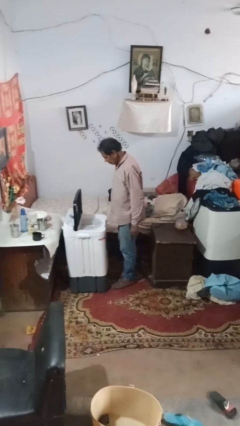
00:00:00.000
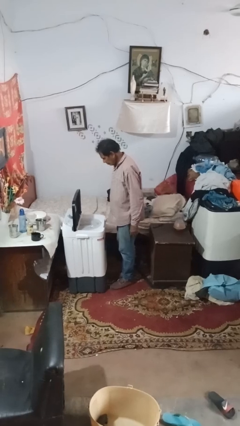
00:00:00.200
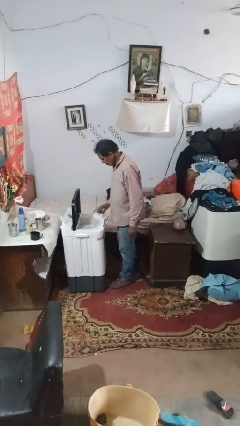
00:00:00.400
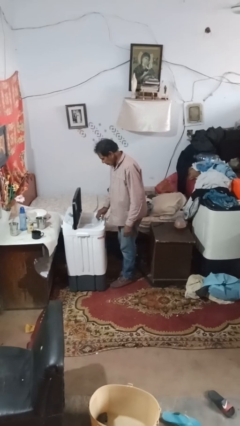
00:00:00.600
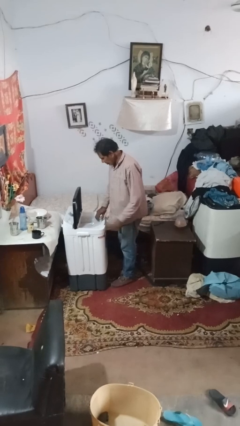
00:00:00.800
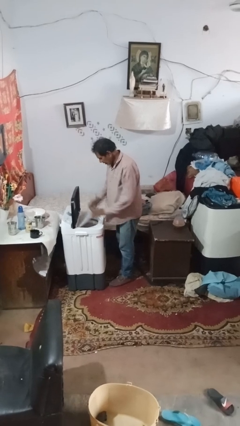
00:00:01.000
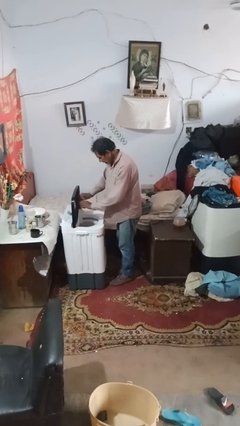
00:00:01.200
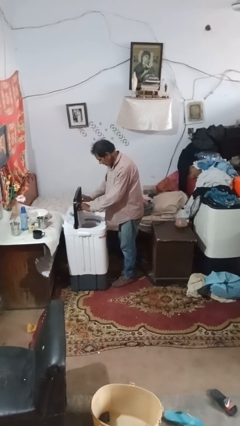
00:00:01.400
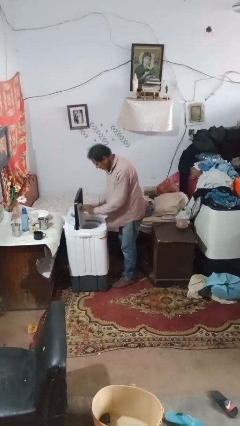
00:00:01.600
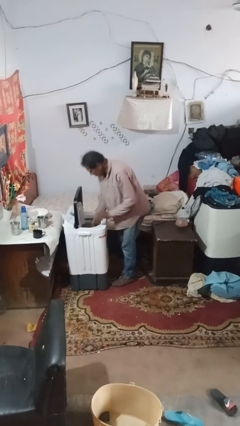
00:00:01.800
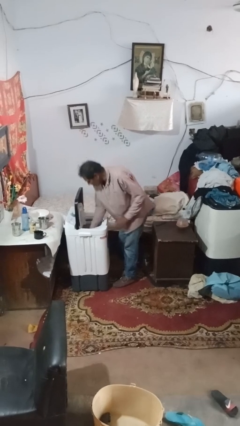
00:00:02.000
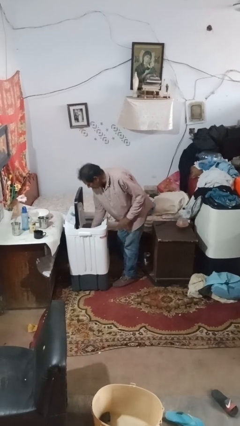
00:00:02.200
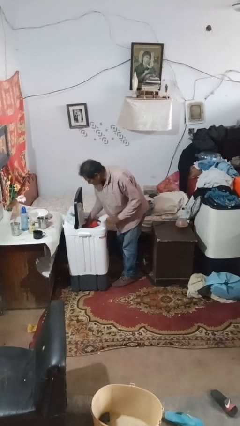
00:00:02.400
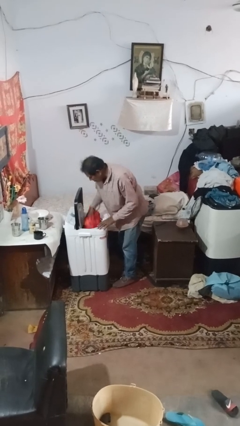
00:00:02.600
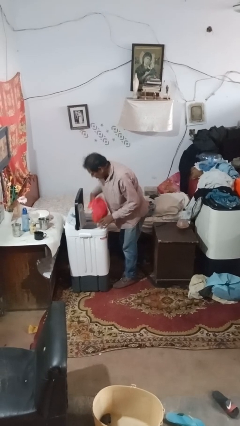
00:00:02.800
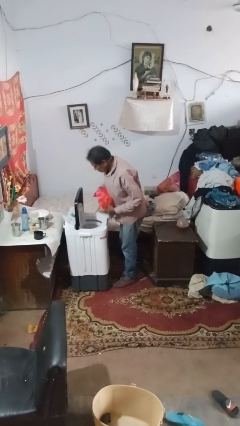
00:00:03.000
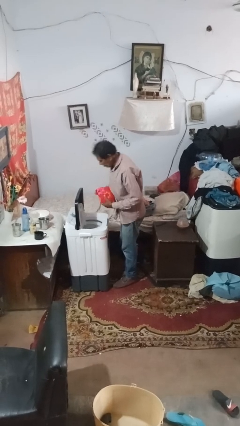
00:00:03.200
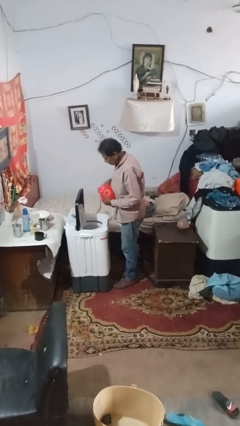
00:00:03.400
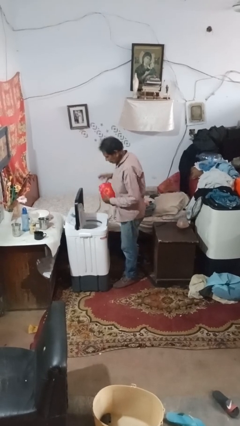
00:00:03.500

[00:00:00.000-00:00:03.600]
person unloads dryer

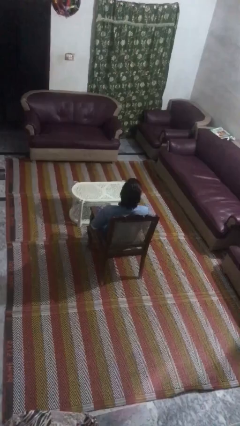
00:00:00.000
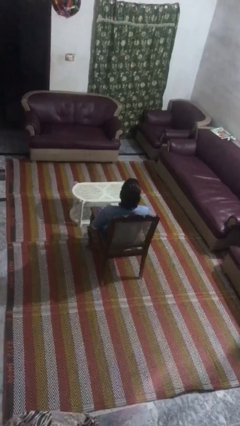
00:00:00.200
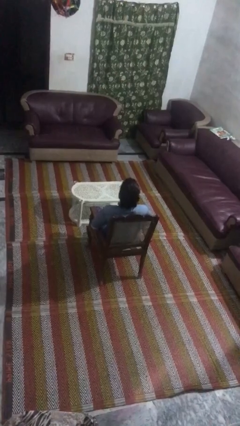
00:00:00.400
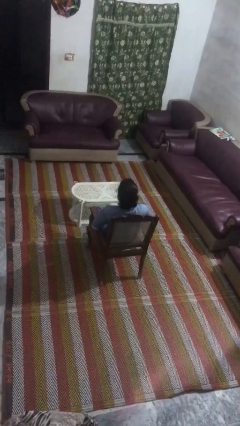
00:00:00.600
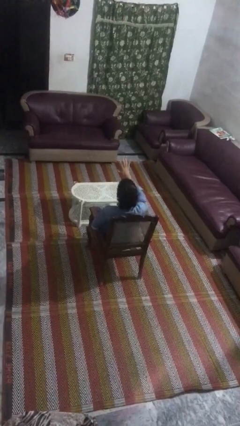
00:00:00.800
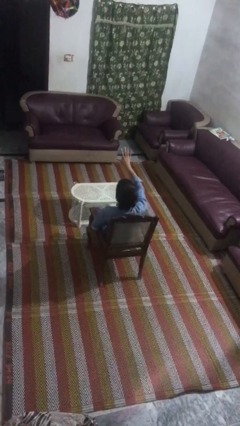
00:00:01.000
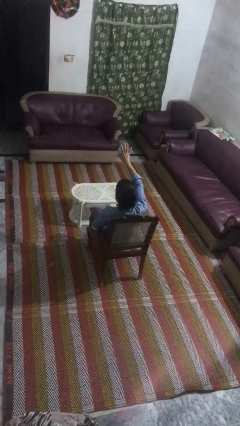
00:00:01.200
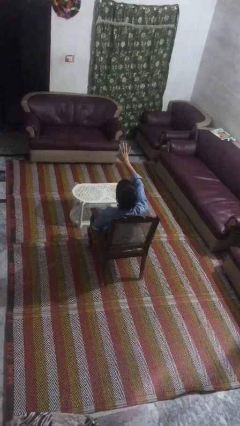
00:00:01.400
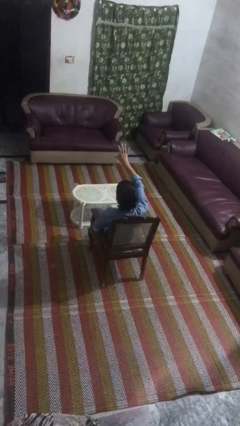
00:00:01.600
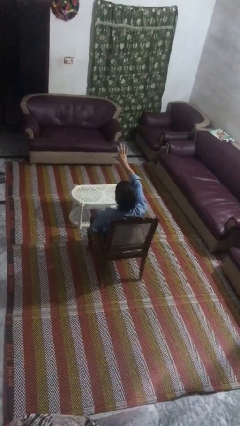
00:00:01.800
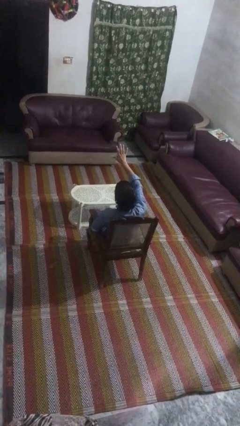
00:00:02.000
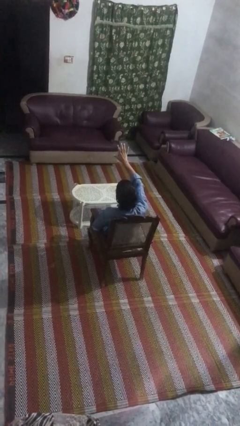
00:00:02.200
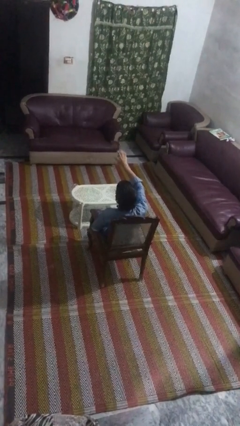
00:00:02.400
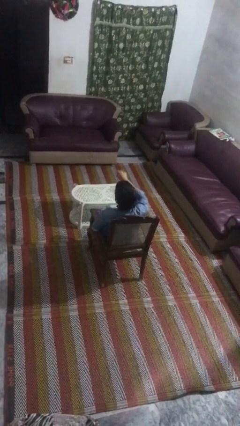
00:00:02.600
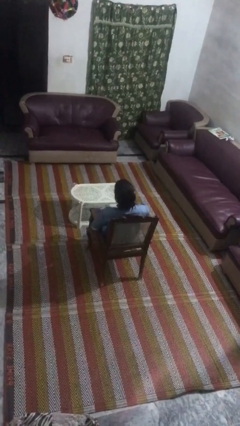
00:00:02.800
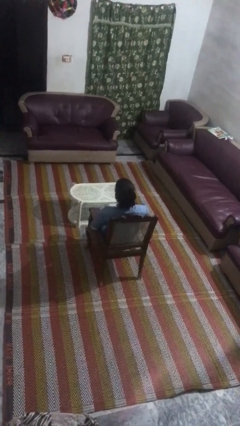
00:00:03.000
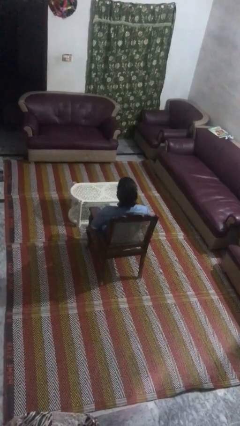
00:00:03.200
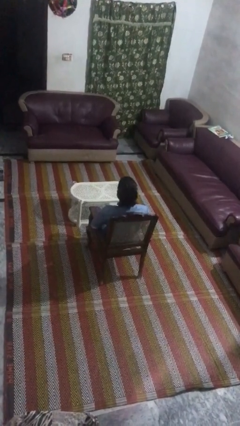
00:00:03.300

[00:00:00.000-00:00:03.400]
person gestures number five

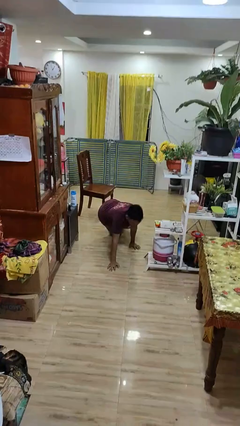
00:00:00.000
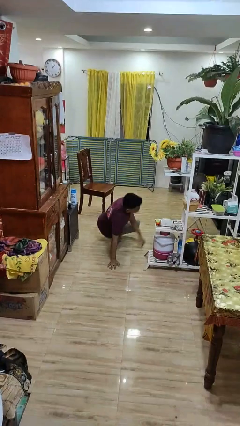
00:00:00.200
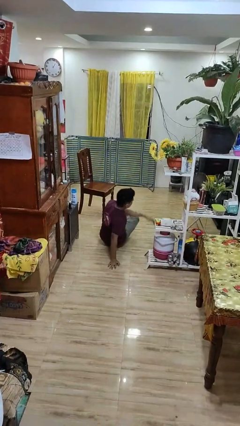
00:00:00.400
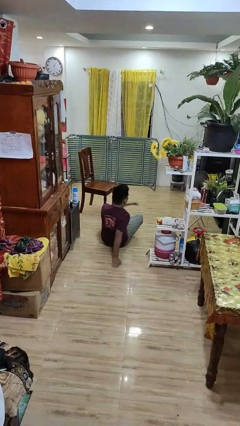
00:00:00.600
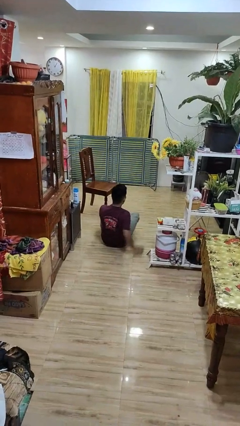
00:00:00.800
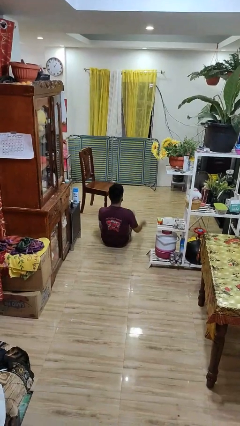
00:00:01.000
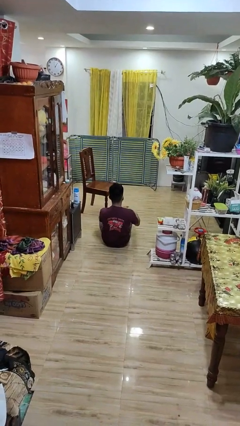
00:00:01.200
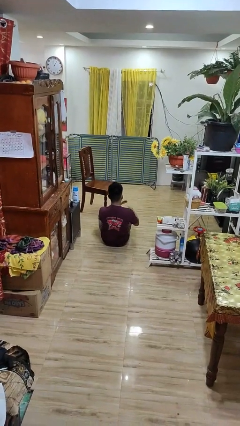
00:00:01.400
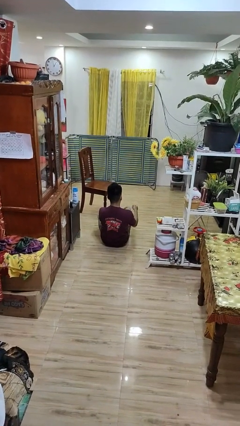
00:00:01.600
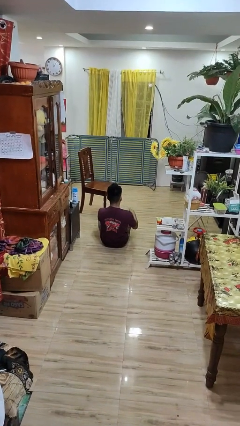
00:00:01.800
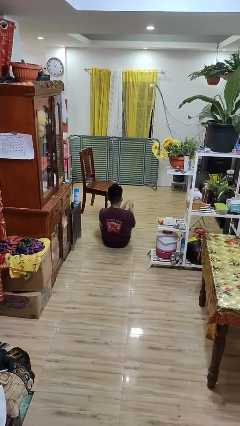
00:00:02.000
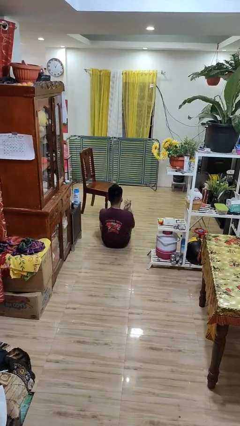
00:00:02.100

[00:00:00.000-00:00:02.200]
person lies down on floor

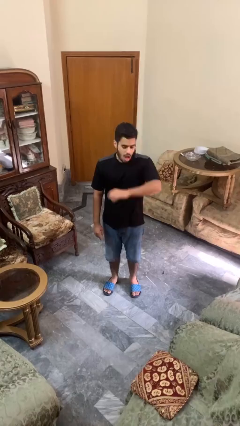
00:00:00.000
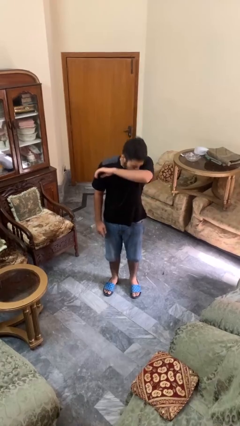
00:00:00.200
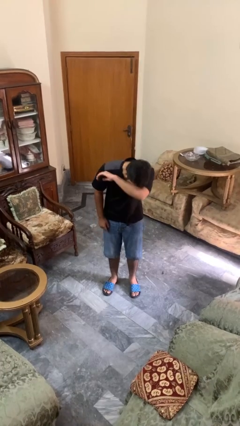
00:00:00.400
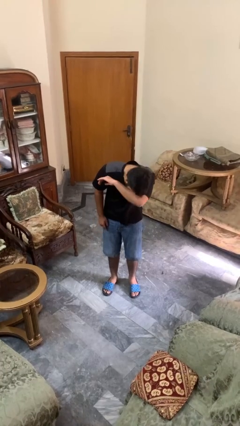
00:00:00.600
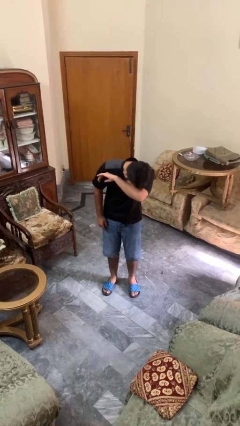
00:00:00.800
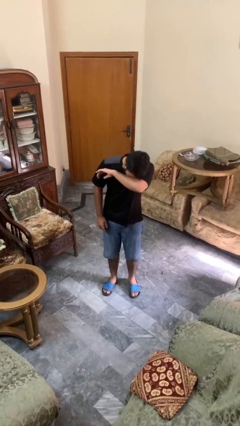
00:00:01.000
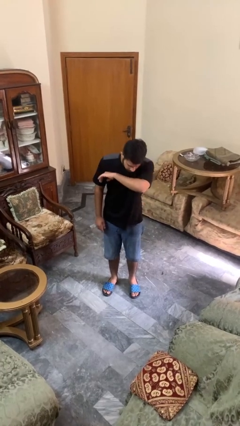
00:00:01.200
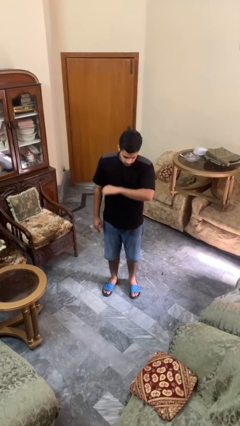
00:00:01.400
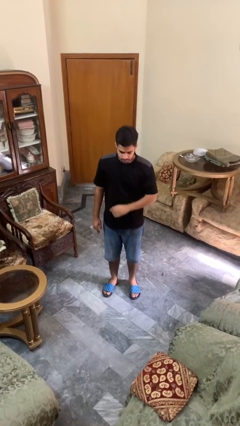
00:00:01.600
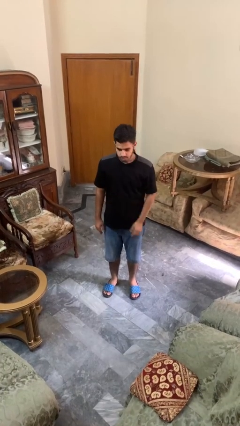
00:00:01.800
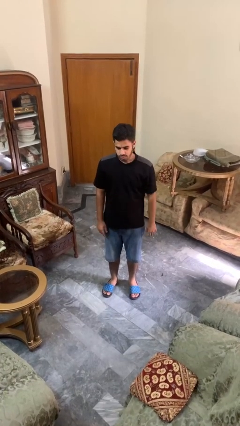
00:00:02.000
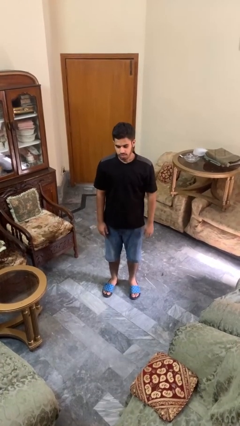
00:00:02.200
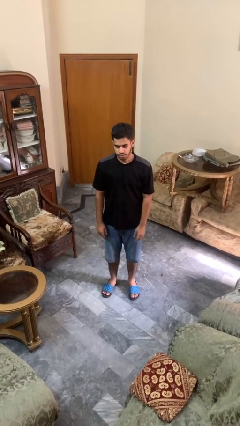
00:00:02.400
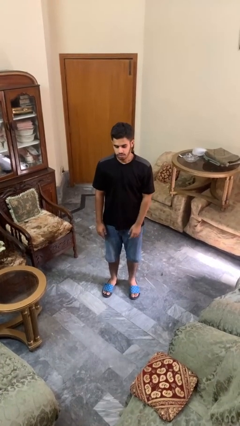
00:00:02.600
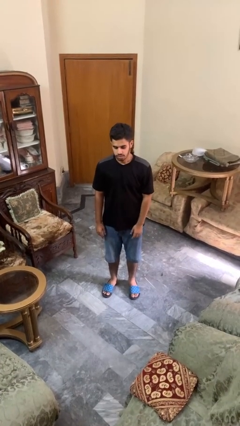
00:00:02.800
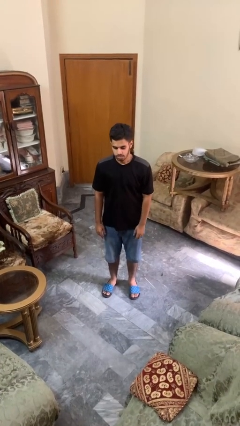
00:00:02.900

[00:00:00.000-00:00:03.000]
person sneezes into arm

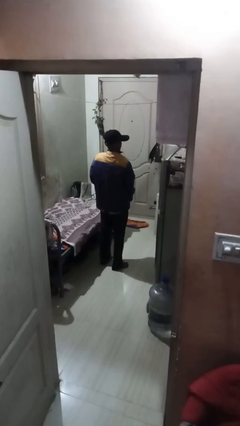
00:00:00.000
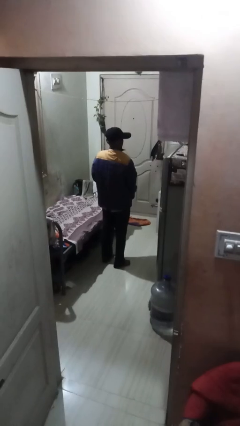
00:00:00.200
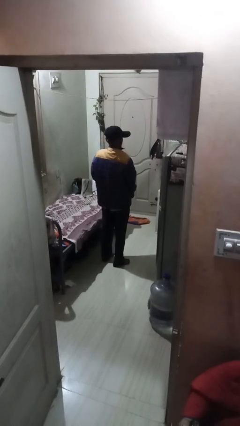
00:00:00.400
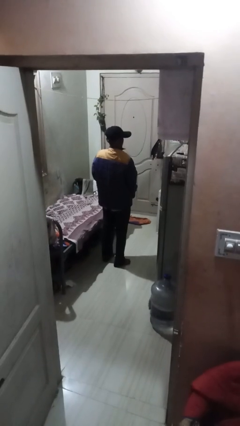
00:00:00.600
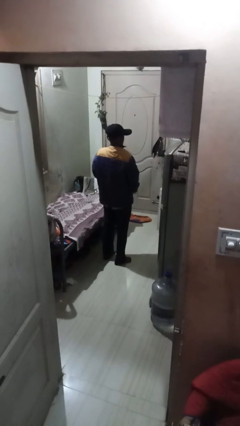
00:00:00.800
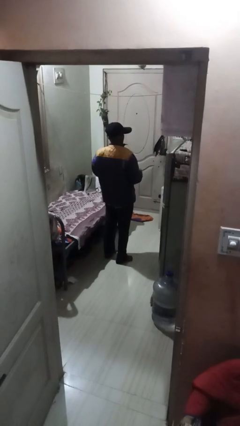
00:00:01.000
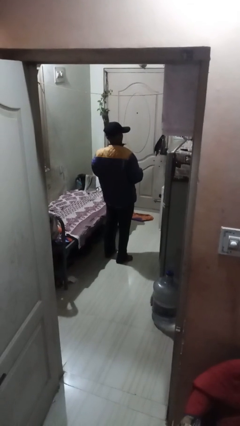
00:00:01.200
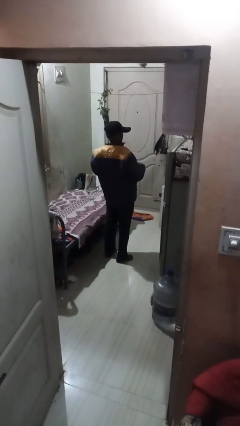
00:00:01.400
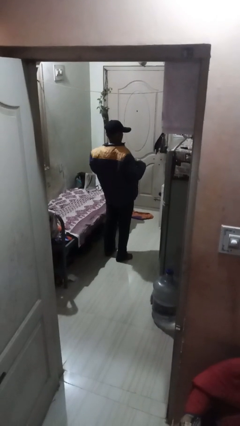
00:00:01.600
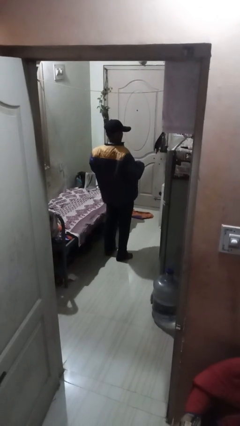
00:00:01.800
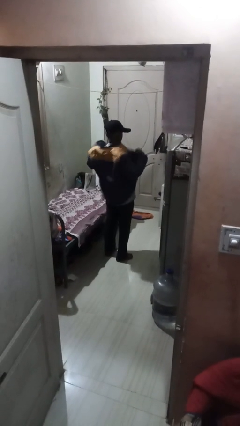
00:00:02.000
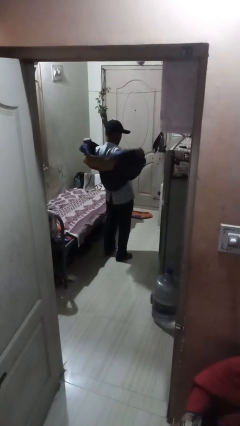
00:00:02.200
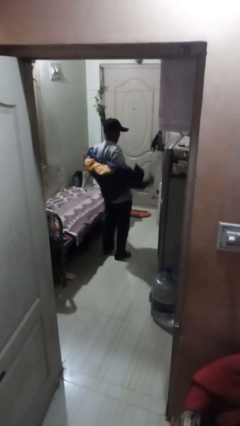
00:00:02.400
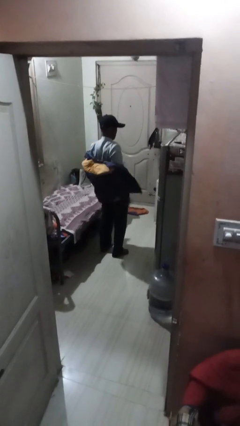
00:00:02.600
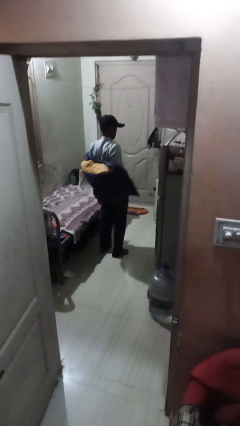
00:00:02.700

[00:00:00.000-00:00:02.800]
person unzips jacket

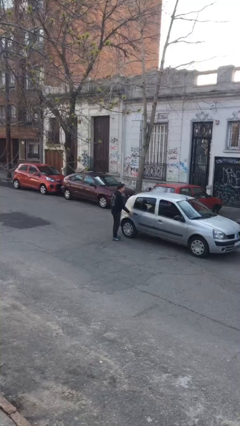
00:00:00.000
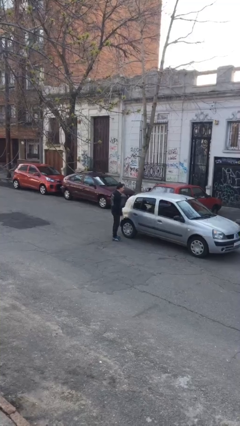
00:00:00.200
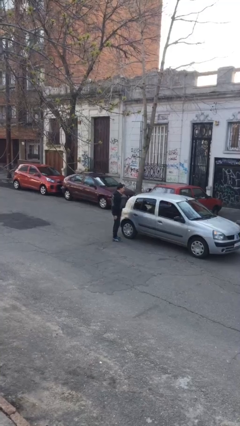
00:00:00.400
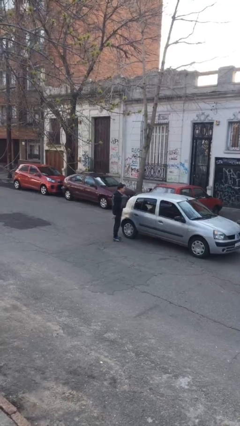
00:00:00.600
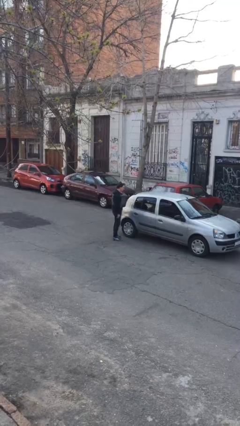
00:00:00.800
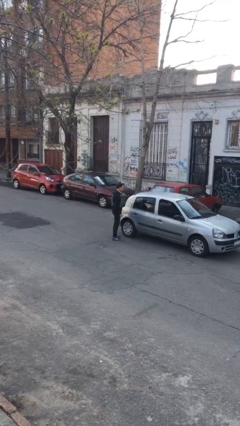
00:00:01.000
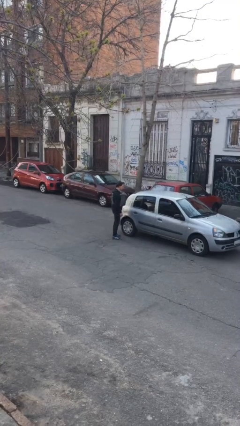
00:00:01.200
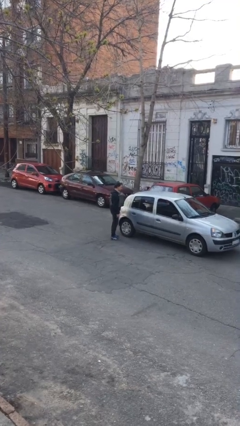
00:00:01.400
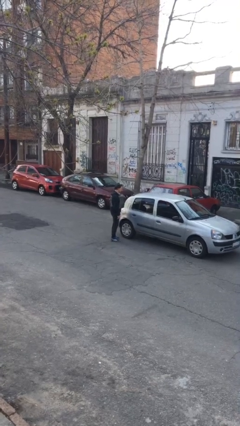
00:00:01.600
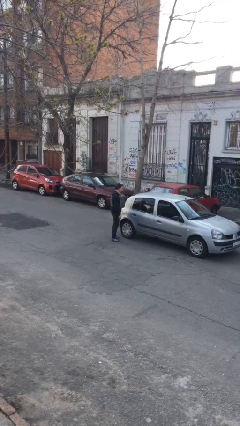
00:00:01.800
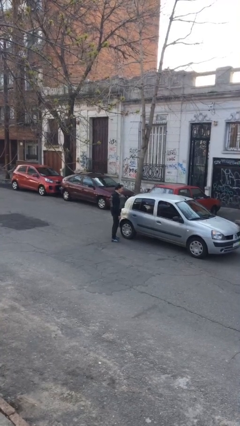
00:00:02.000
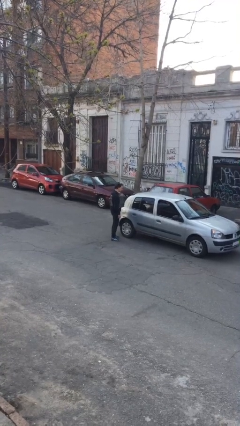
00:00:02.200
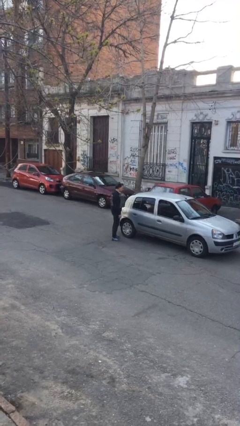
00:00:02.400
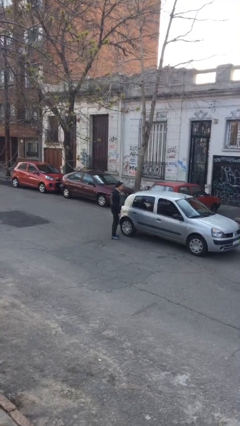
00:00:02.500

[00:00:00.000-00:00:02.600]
person closes car door
